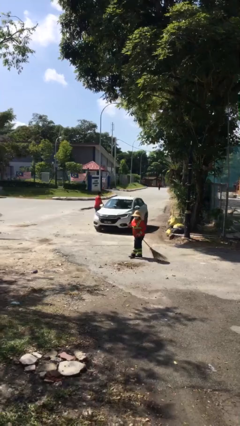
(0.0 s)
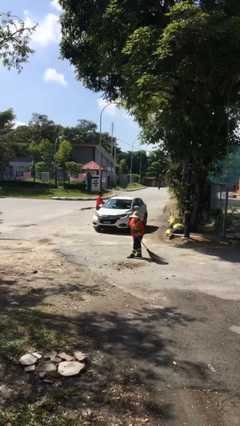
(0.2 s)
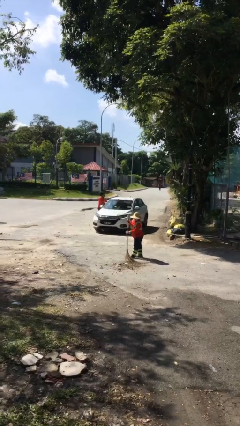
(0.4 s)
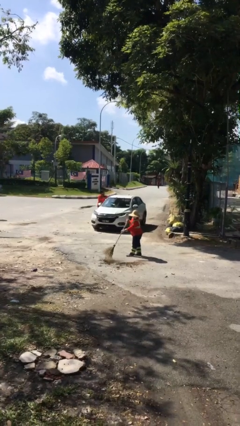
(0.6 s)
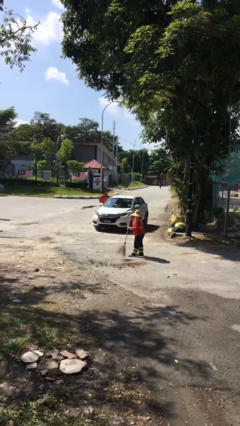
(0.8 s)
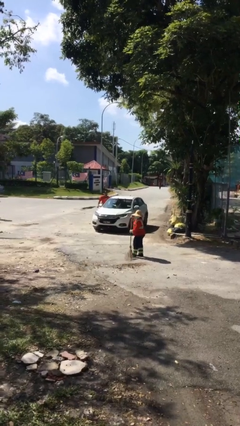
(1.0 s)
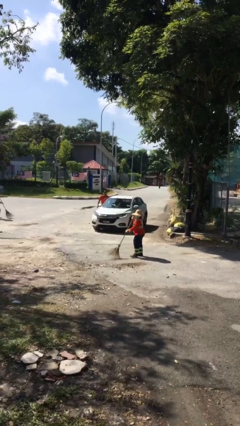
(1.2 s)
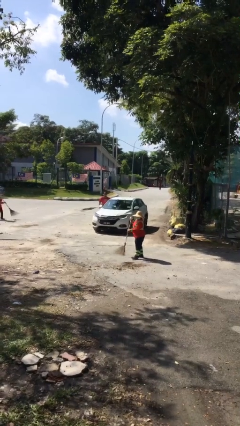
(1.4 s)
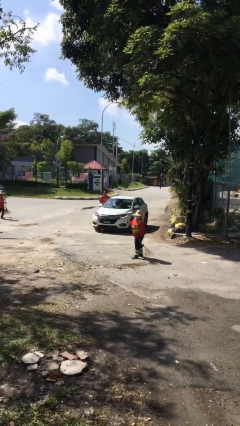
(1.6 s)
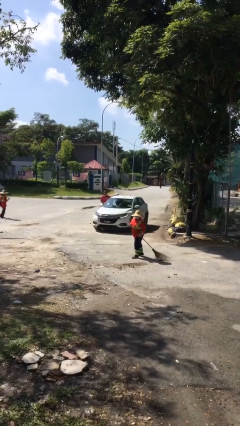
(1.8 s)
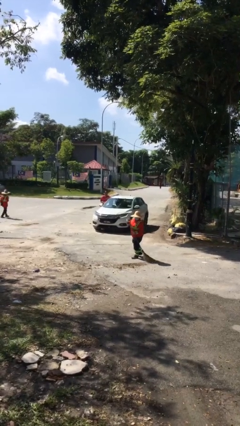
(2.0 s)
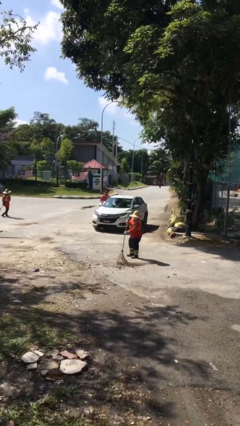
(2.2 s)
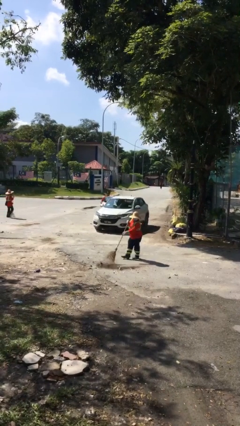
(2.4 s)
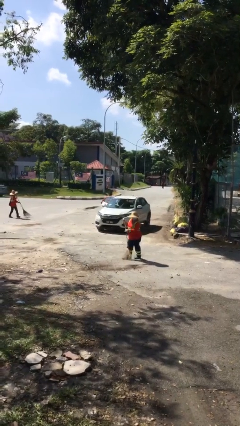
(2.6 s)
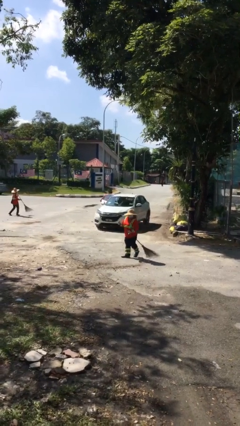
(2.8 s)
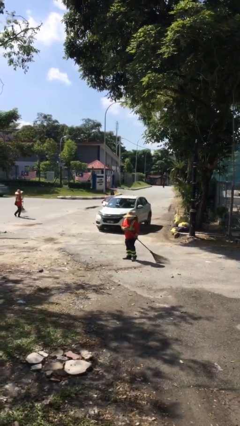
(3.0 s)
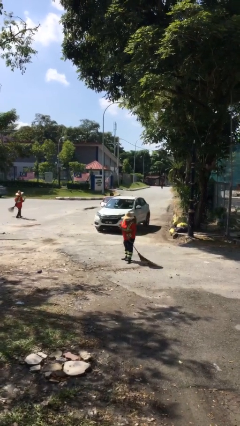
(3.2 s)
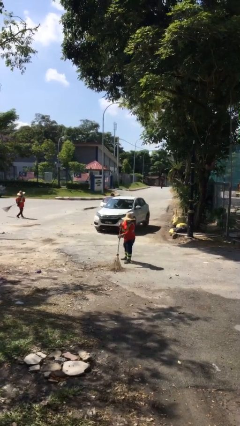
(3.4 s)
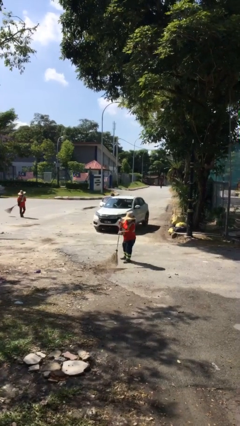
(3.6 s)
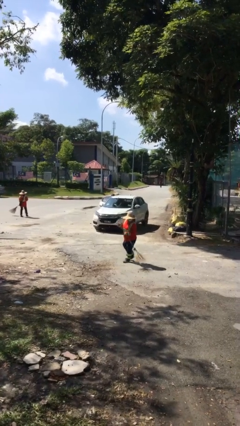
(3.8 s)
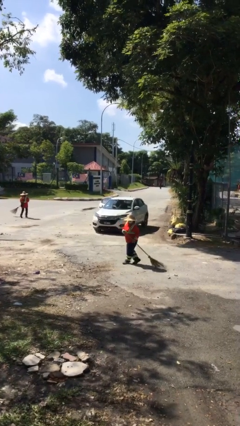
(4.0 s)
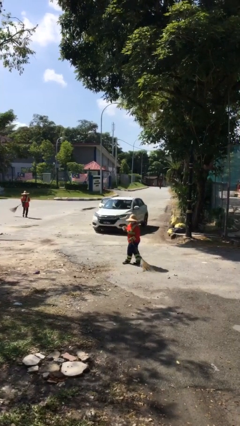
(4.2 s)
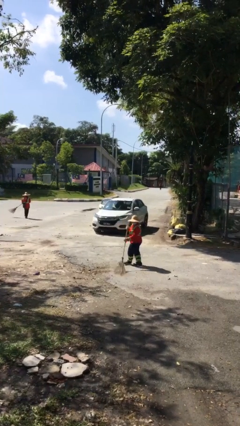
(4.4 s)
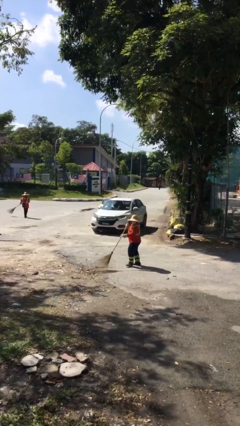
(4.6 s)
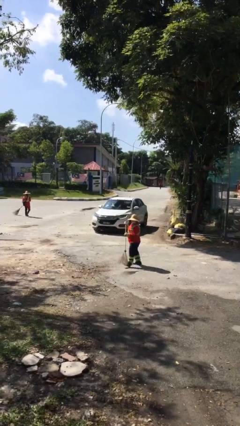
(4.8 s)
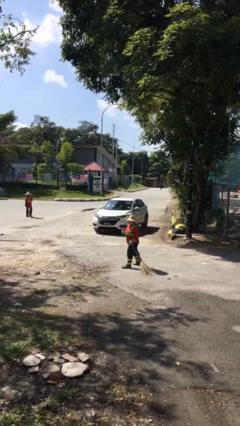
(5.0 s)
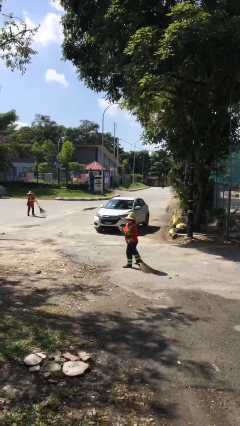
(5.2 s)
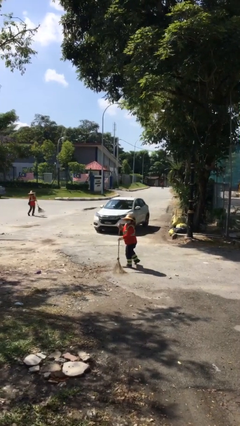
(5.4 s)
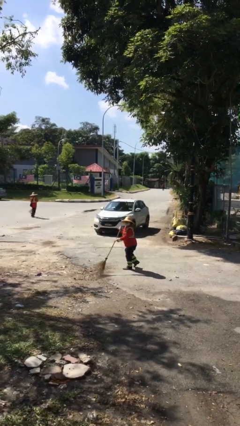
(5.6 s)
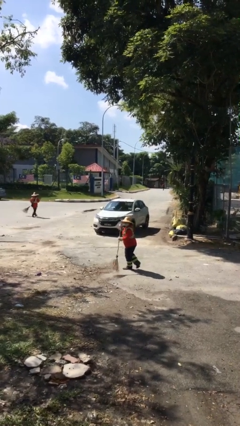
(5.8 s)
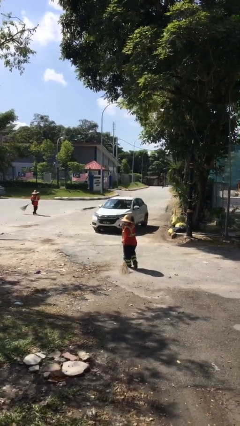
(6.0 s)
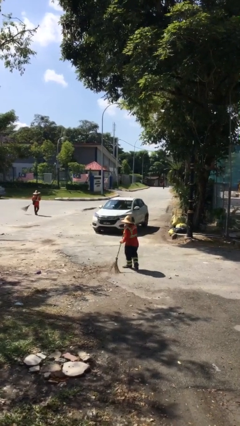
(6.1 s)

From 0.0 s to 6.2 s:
car picks up person

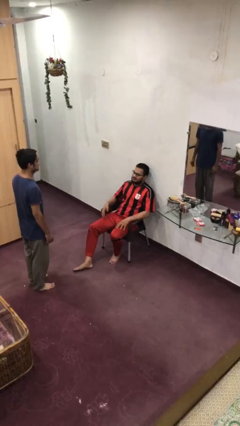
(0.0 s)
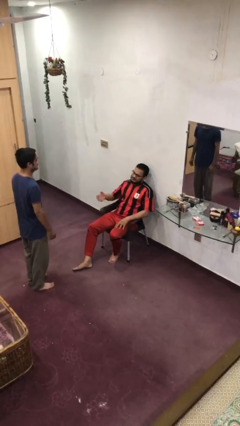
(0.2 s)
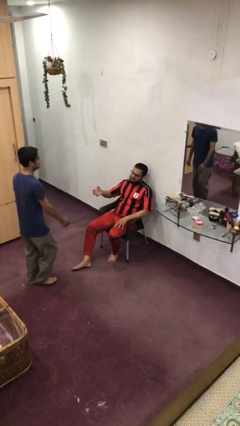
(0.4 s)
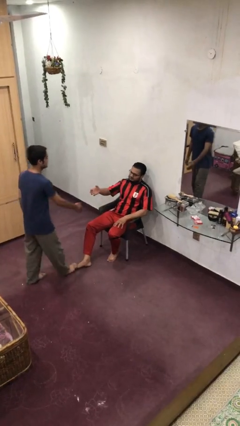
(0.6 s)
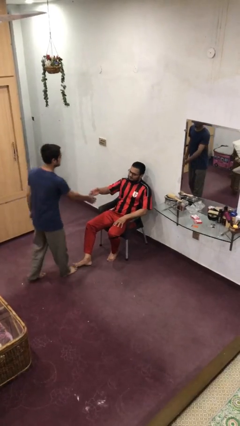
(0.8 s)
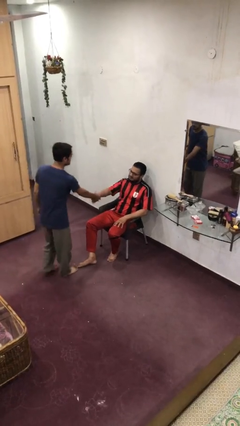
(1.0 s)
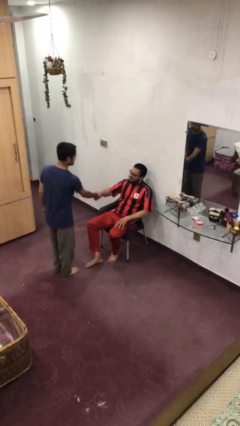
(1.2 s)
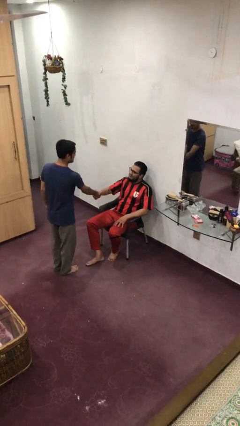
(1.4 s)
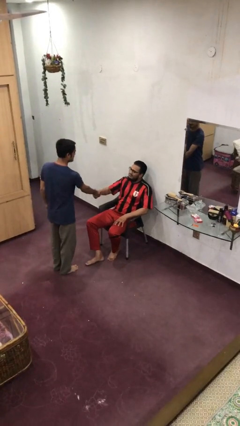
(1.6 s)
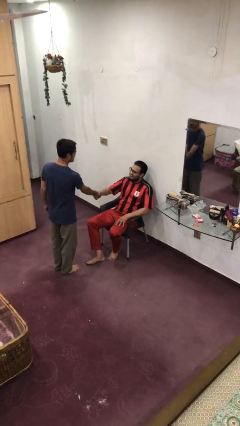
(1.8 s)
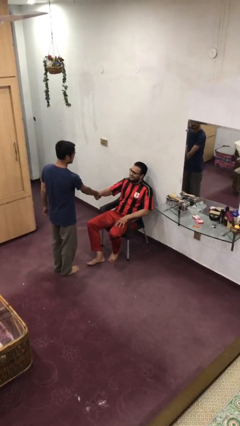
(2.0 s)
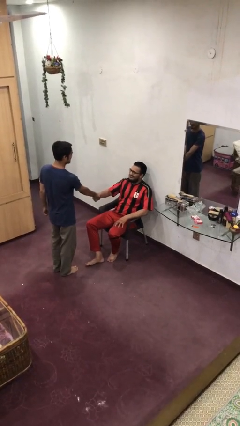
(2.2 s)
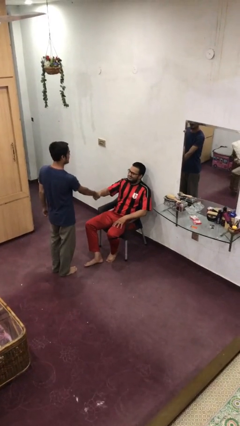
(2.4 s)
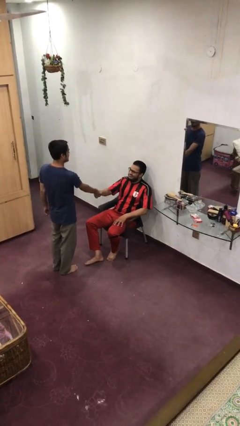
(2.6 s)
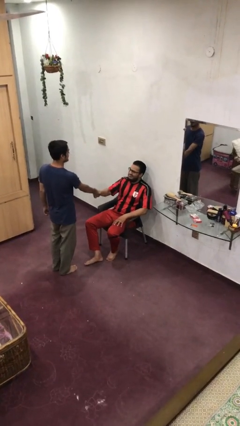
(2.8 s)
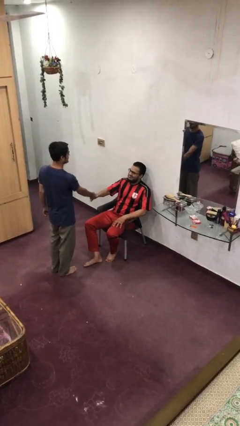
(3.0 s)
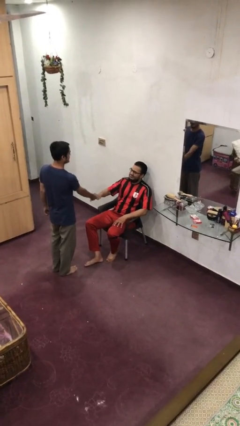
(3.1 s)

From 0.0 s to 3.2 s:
person shakes hand

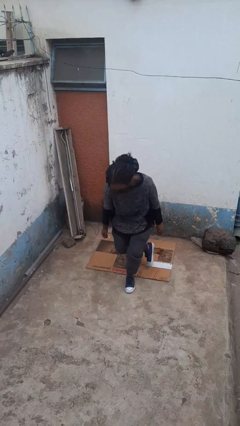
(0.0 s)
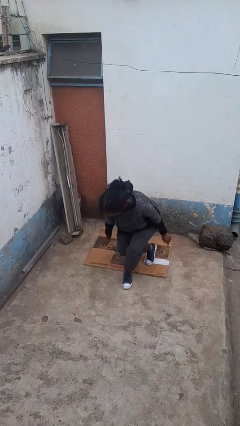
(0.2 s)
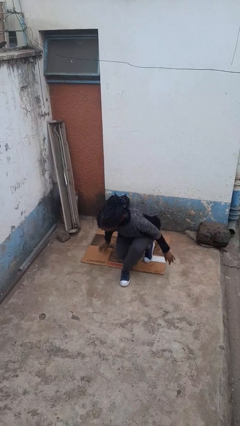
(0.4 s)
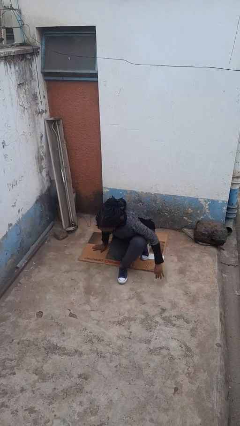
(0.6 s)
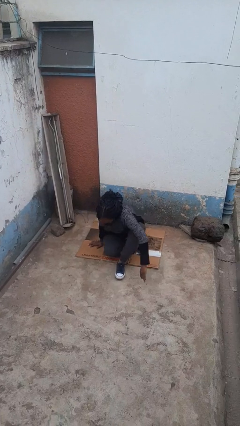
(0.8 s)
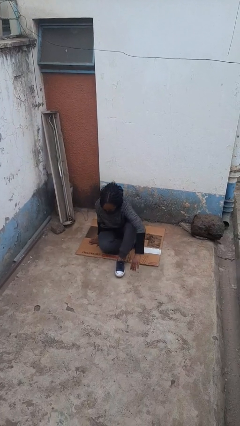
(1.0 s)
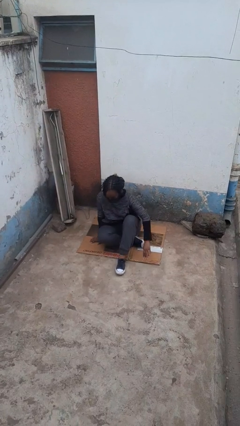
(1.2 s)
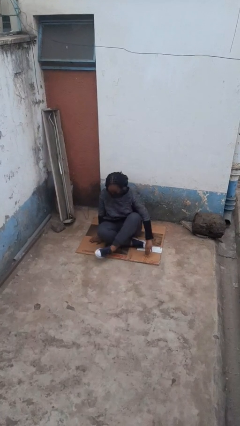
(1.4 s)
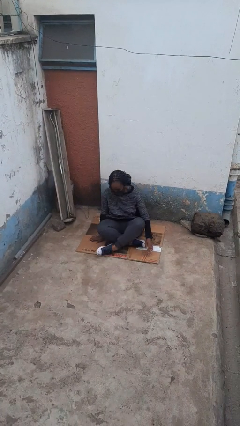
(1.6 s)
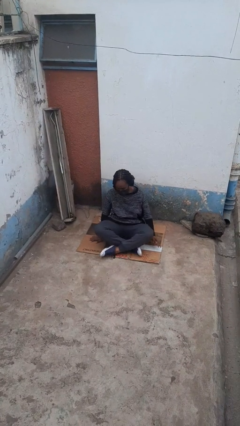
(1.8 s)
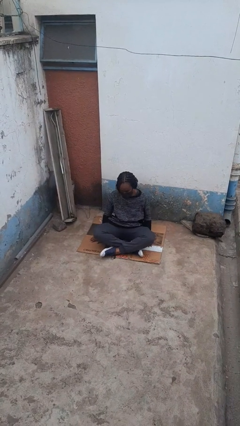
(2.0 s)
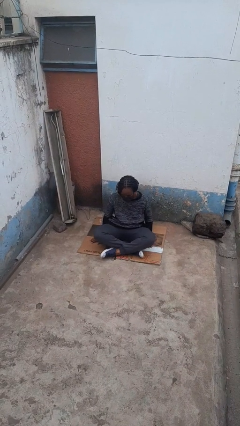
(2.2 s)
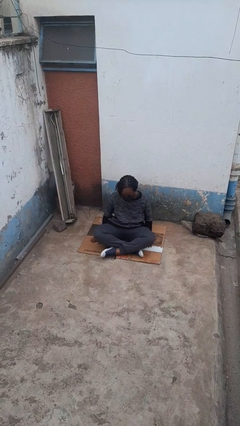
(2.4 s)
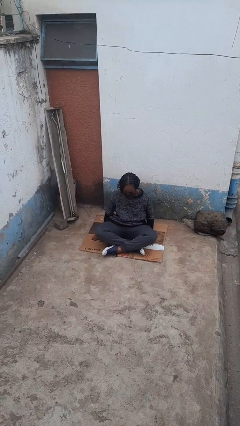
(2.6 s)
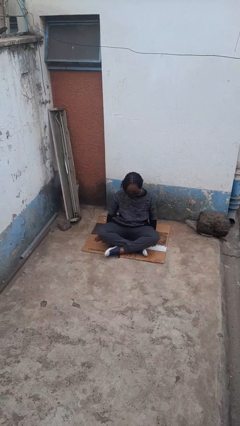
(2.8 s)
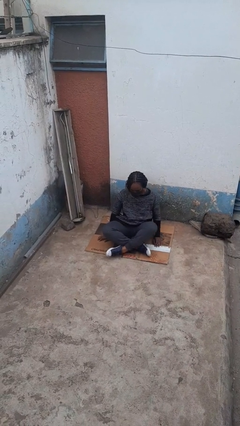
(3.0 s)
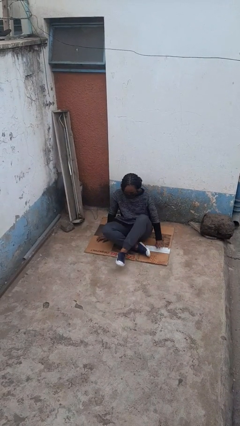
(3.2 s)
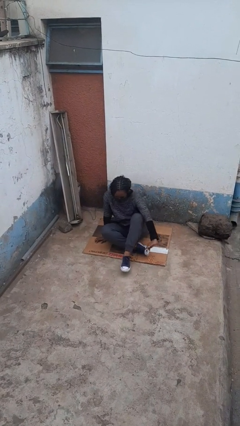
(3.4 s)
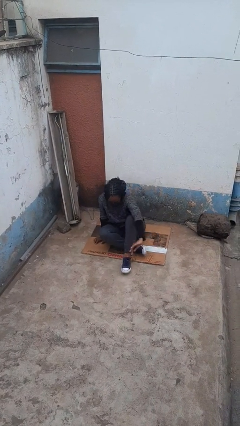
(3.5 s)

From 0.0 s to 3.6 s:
person sits crisscross

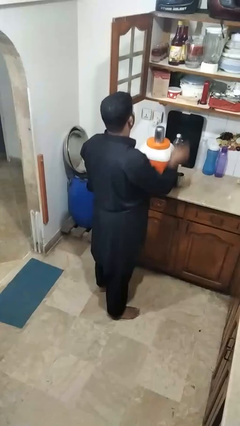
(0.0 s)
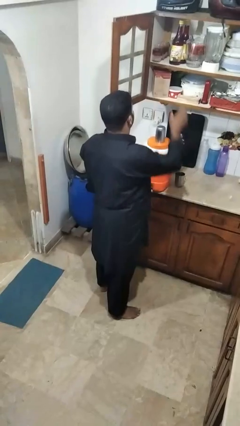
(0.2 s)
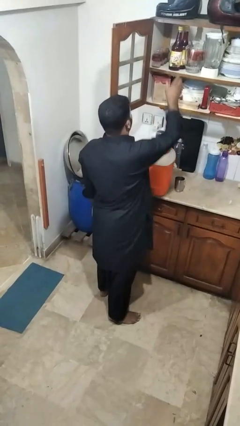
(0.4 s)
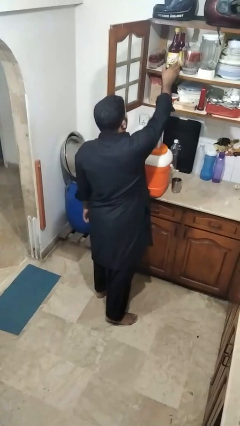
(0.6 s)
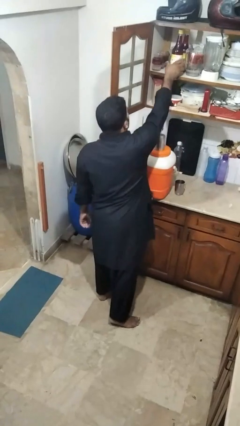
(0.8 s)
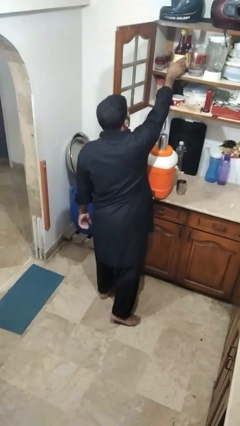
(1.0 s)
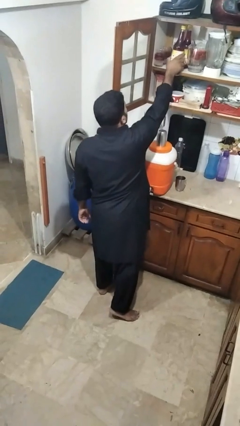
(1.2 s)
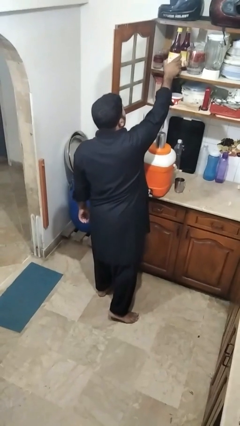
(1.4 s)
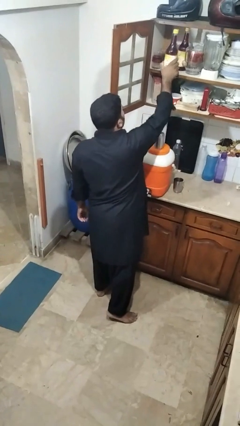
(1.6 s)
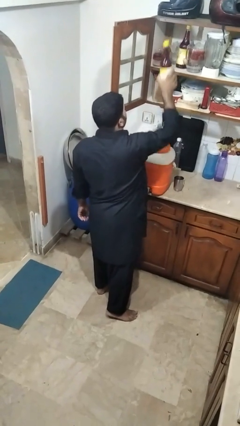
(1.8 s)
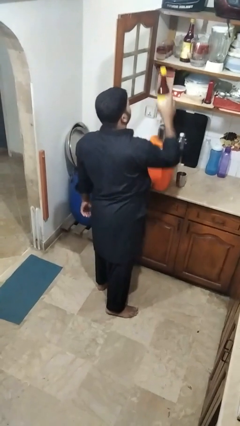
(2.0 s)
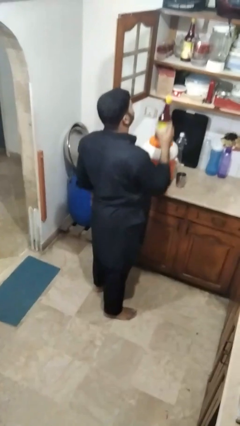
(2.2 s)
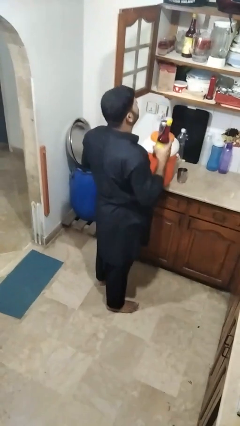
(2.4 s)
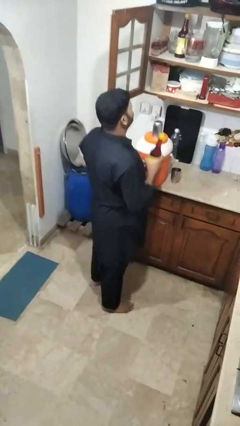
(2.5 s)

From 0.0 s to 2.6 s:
person picks up object from cabinet

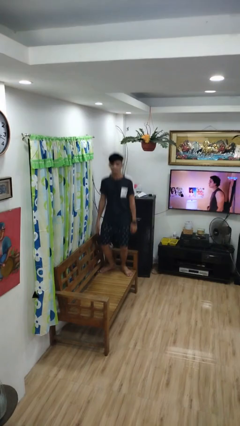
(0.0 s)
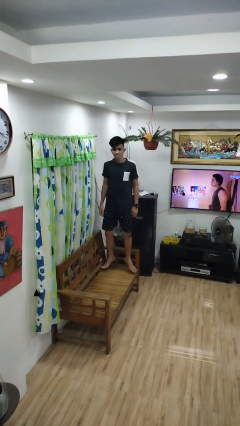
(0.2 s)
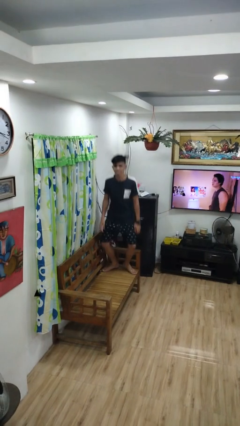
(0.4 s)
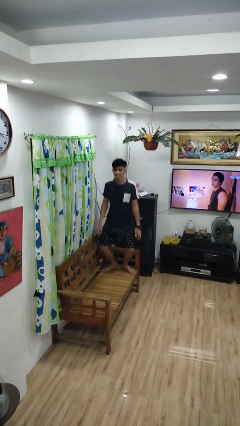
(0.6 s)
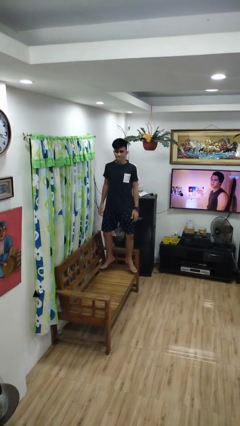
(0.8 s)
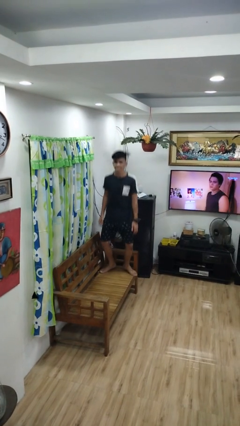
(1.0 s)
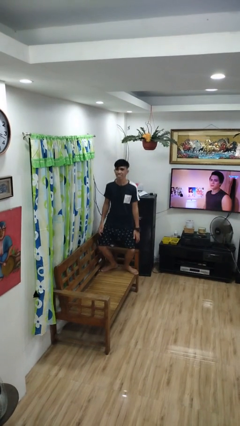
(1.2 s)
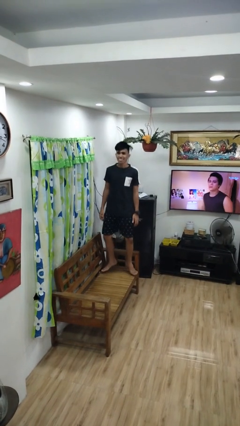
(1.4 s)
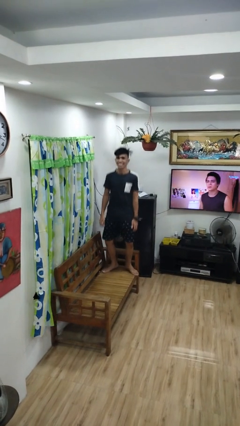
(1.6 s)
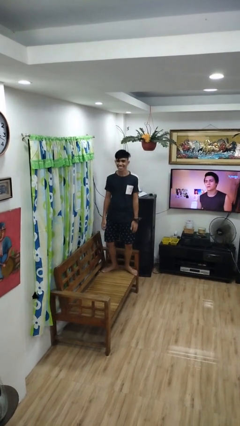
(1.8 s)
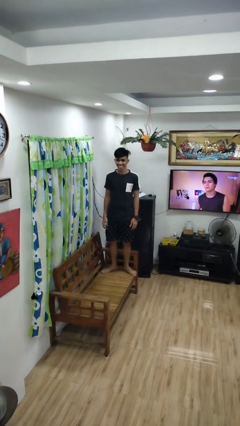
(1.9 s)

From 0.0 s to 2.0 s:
person jumps on couch
